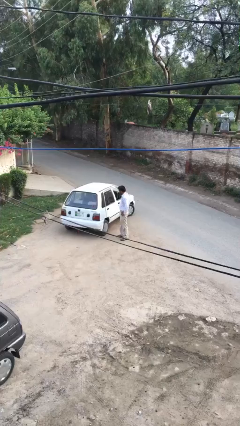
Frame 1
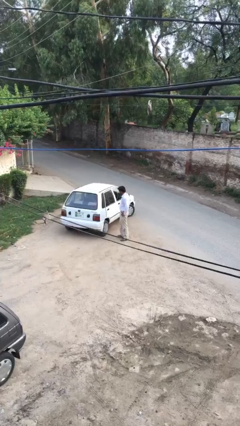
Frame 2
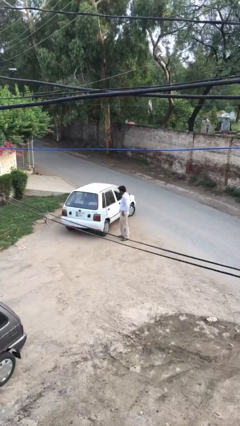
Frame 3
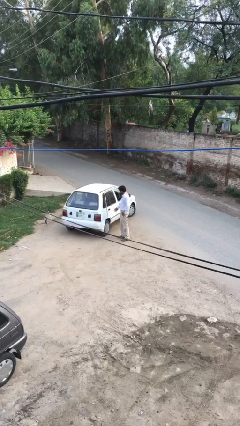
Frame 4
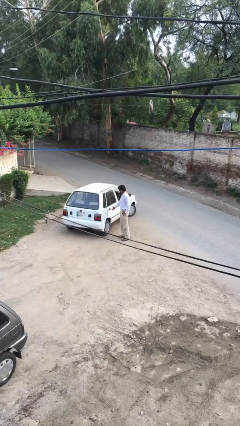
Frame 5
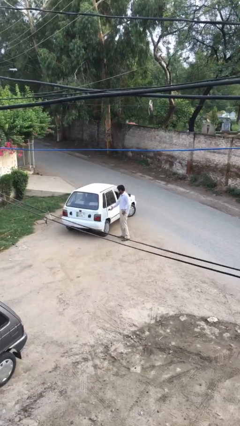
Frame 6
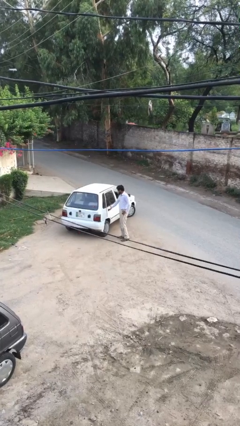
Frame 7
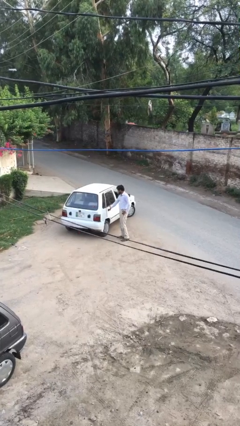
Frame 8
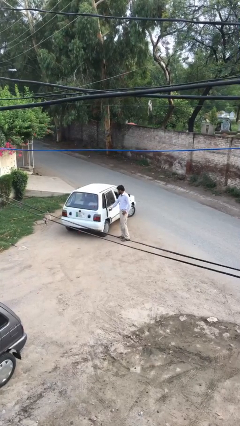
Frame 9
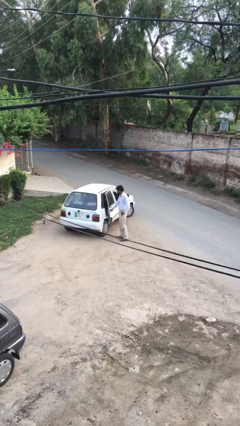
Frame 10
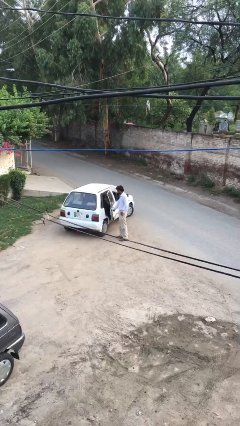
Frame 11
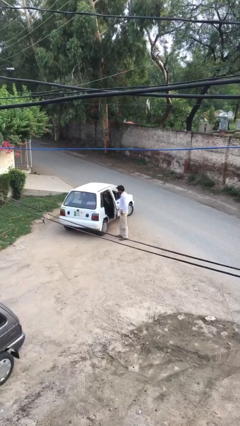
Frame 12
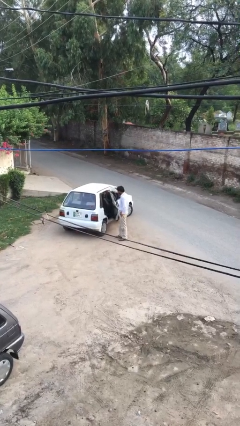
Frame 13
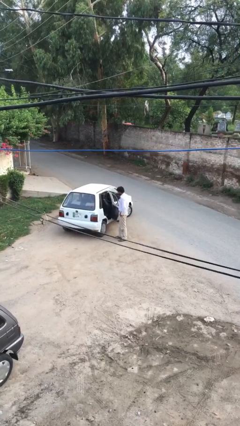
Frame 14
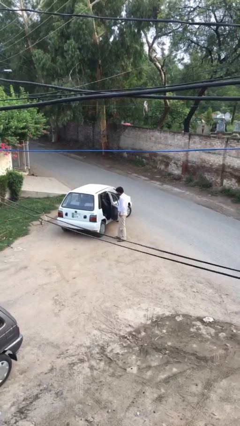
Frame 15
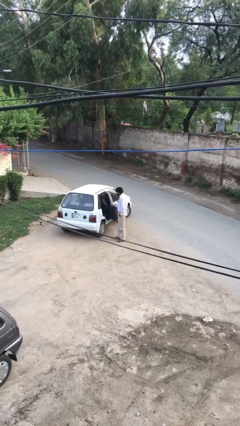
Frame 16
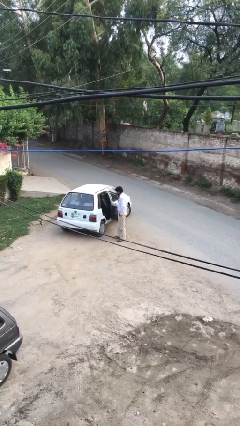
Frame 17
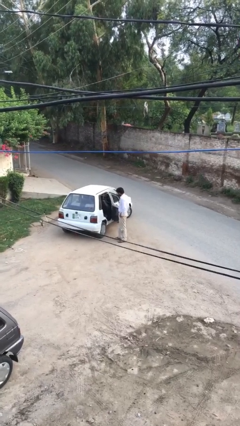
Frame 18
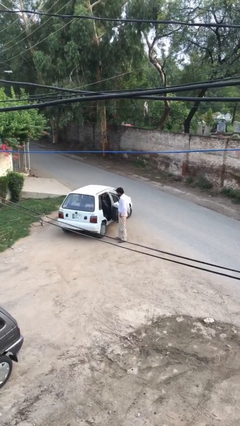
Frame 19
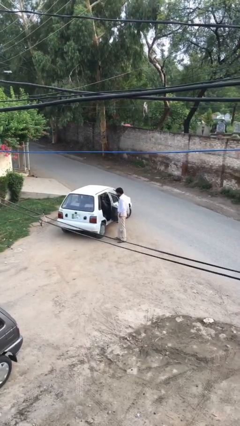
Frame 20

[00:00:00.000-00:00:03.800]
person opens car door

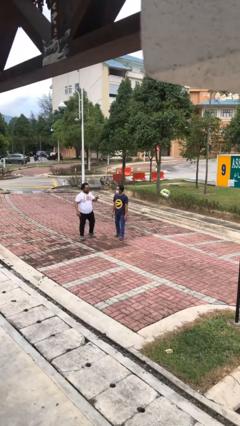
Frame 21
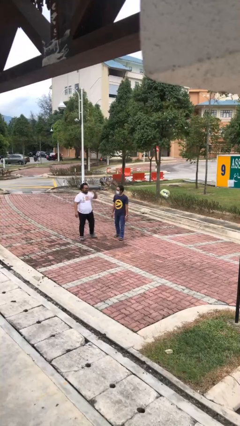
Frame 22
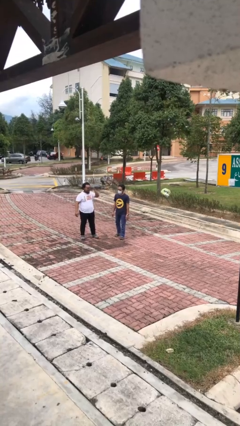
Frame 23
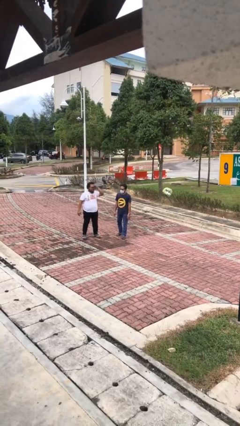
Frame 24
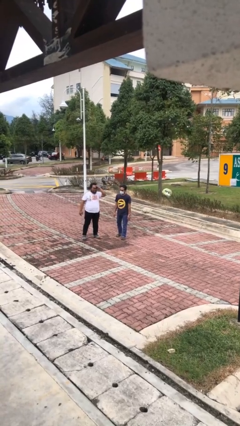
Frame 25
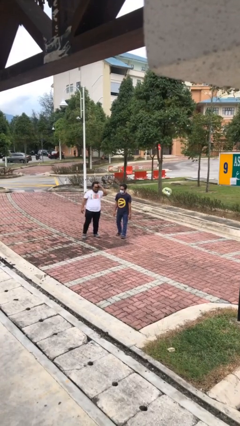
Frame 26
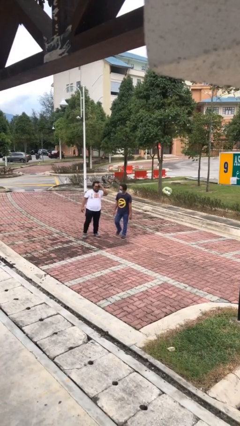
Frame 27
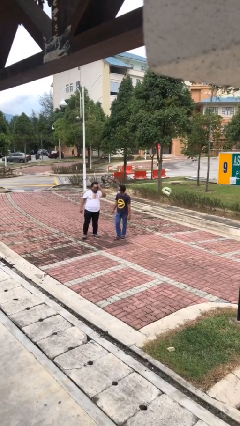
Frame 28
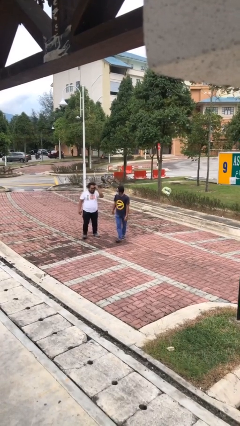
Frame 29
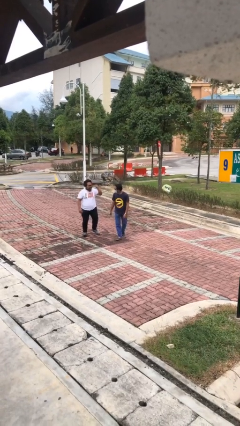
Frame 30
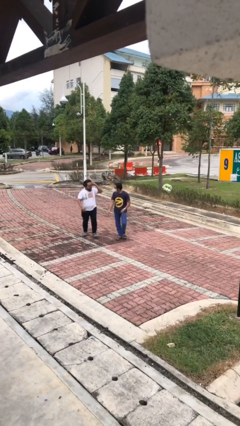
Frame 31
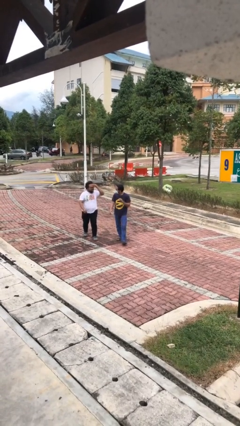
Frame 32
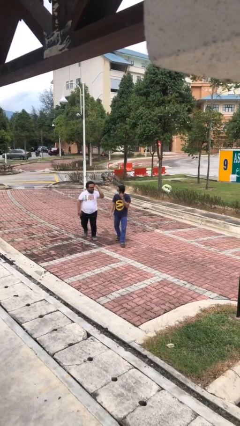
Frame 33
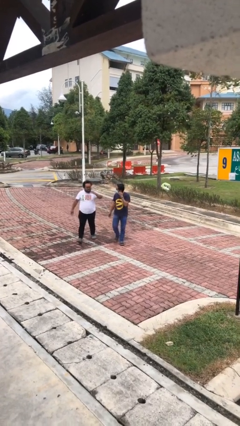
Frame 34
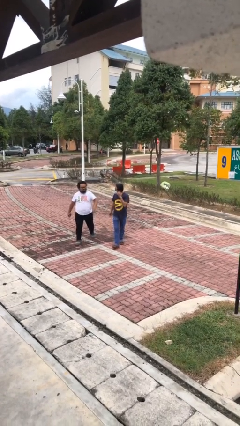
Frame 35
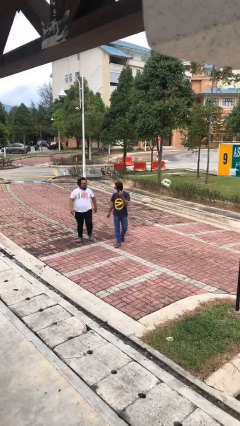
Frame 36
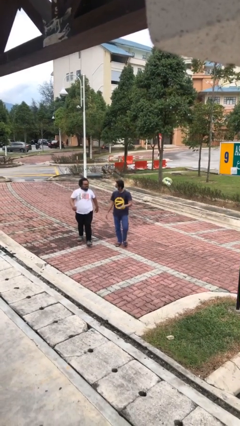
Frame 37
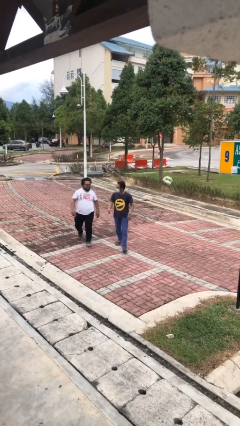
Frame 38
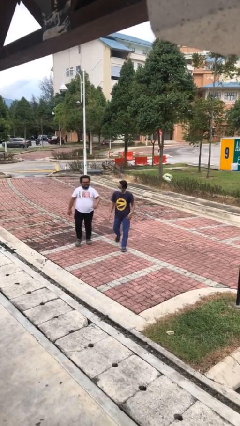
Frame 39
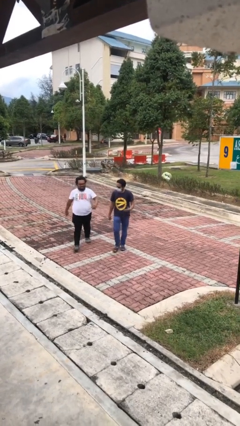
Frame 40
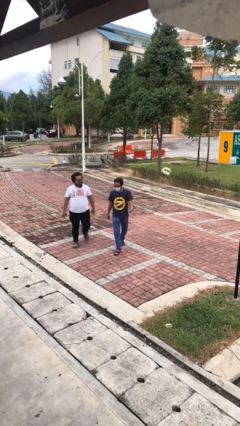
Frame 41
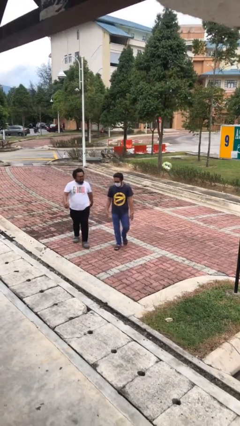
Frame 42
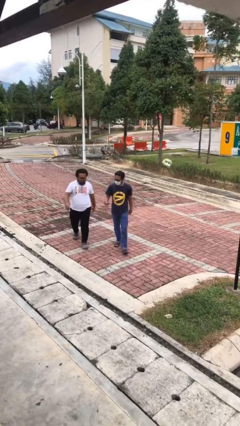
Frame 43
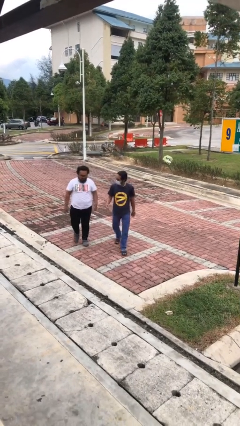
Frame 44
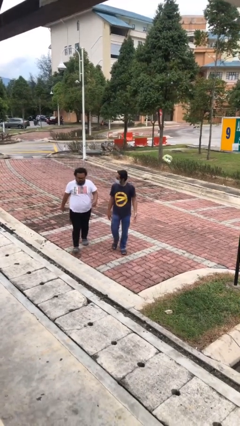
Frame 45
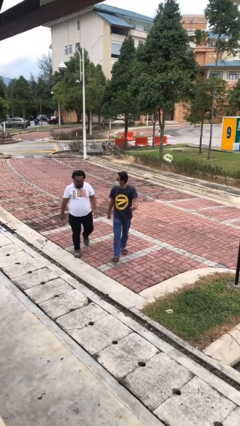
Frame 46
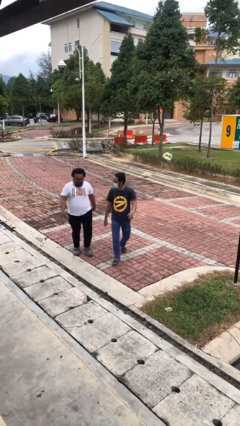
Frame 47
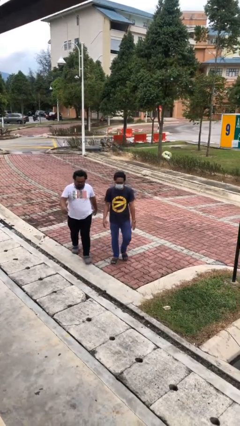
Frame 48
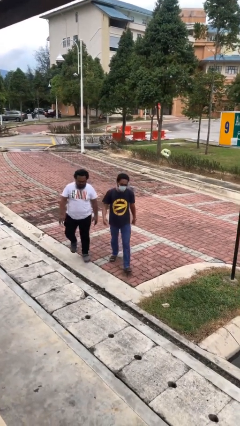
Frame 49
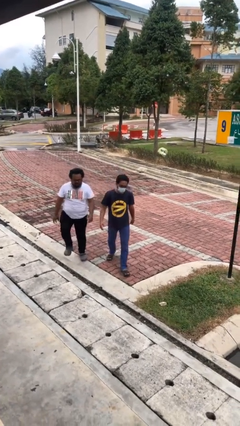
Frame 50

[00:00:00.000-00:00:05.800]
person talks to person

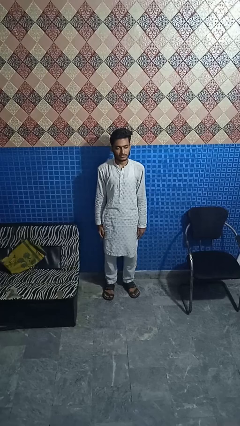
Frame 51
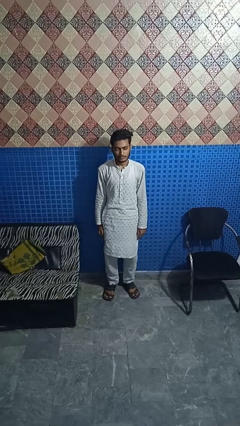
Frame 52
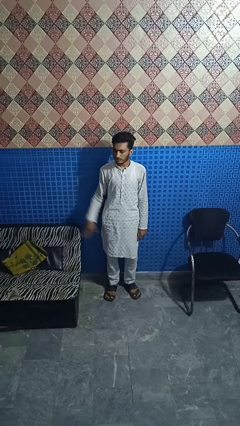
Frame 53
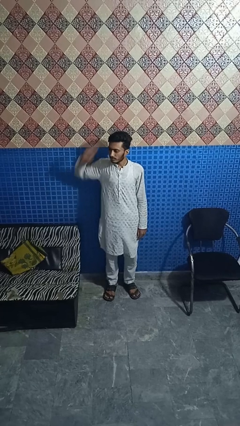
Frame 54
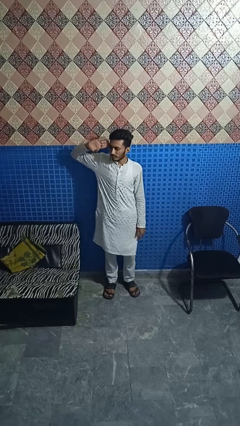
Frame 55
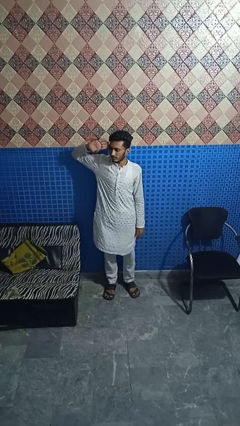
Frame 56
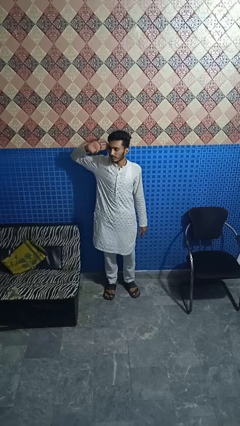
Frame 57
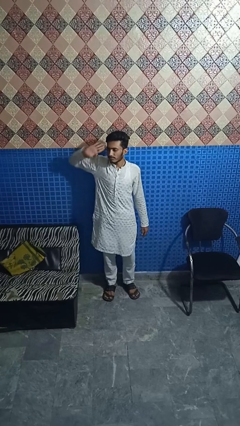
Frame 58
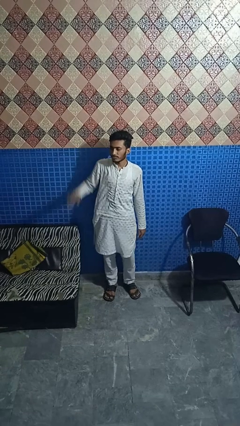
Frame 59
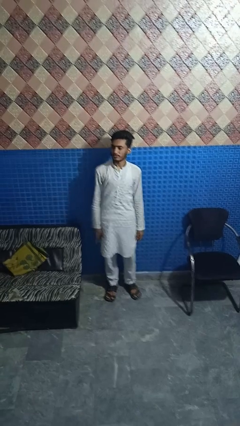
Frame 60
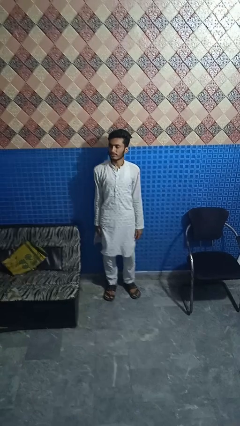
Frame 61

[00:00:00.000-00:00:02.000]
person salutes

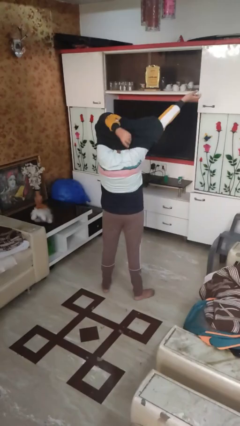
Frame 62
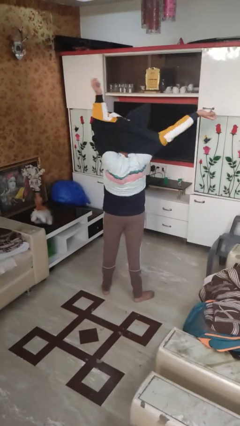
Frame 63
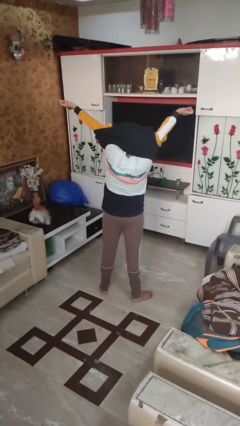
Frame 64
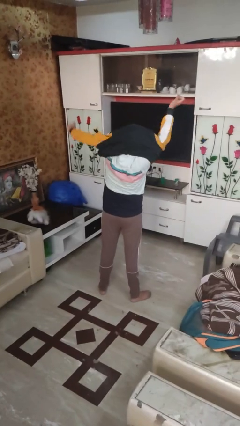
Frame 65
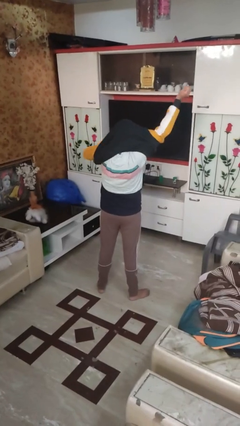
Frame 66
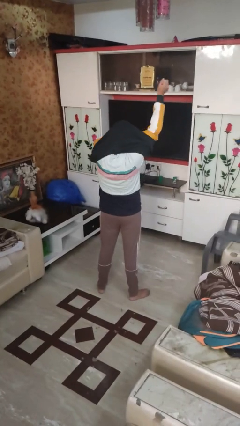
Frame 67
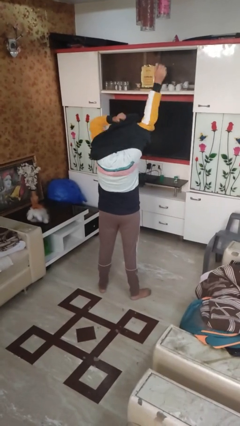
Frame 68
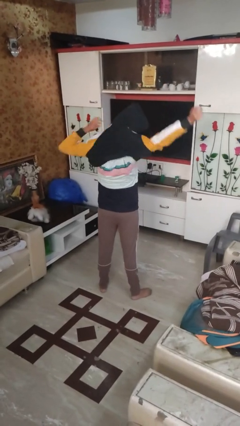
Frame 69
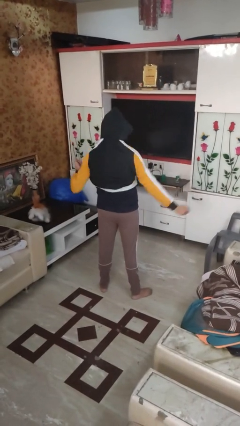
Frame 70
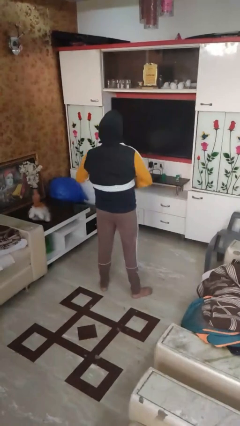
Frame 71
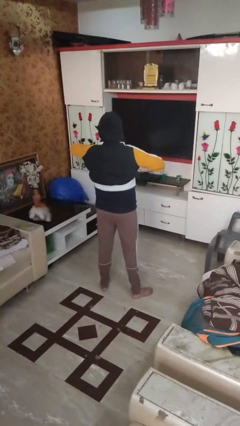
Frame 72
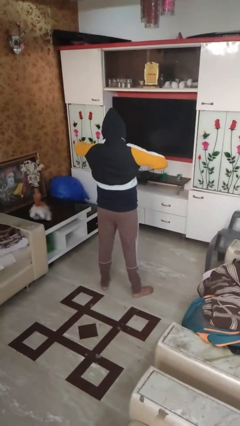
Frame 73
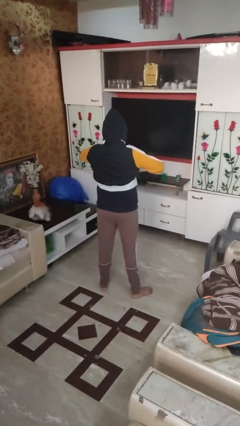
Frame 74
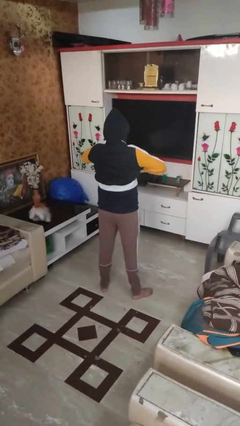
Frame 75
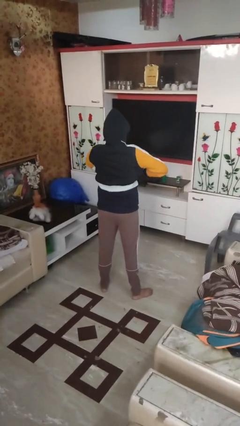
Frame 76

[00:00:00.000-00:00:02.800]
person puts on hoodie

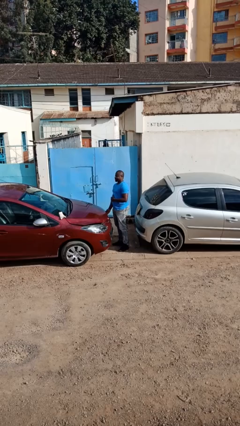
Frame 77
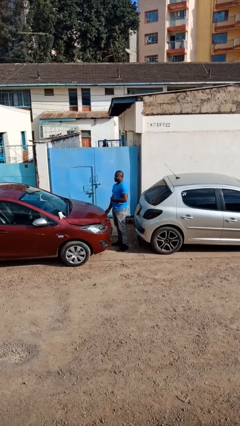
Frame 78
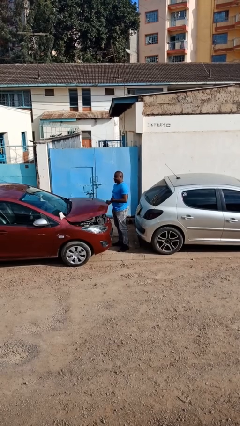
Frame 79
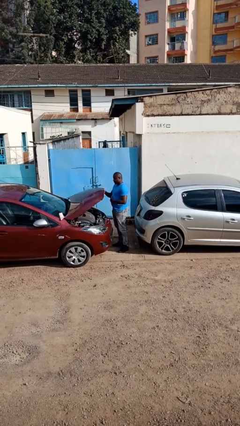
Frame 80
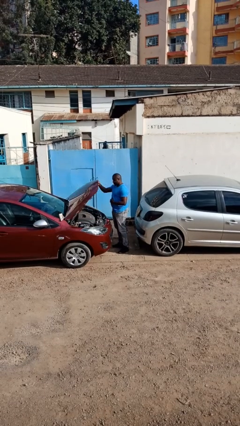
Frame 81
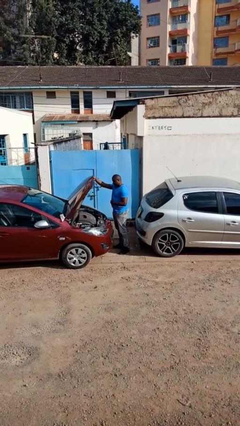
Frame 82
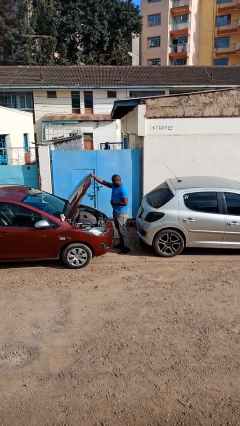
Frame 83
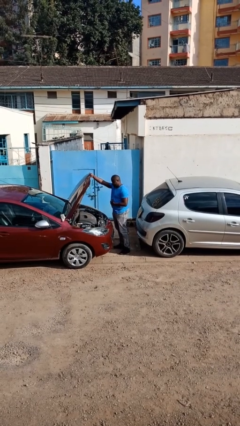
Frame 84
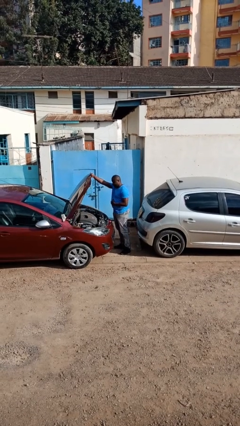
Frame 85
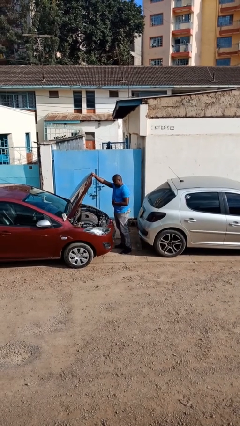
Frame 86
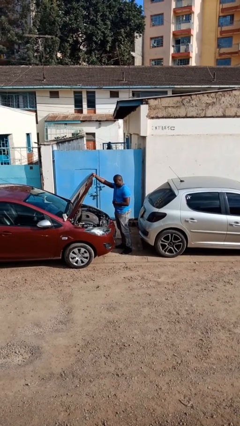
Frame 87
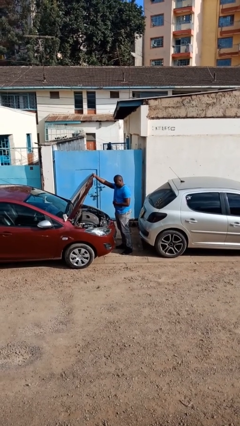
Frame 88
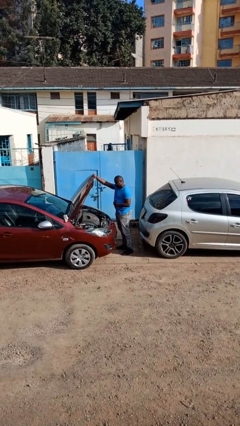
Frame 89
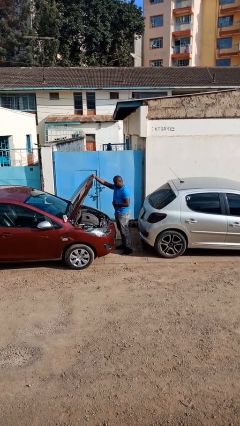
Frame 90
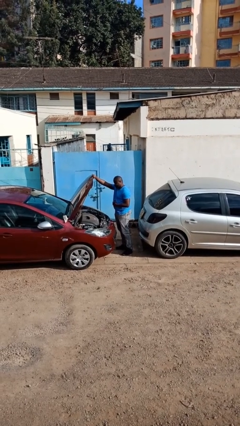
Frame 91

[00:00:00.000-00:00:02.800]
person opens car hood

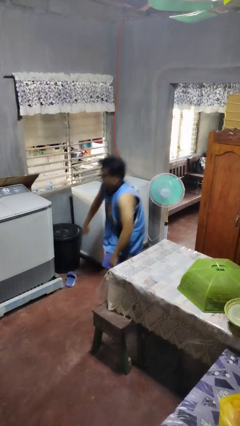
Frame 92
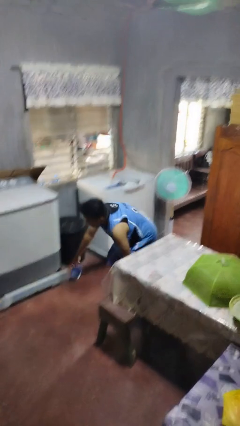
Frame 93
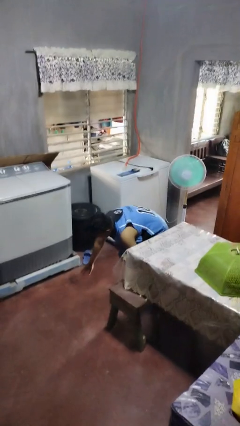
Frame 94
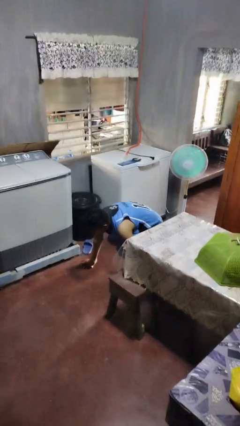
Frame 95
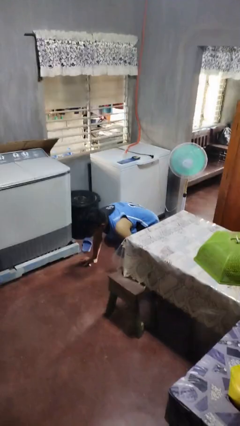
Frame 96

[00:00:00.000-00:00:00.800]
person trips on object on floor
